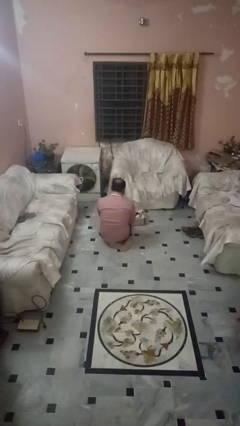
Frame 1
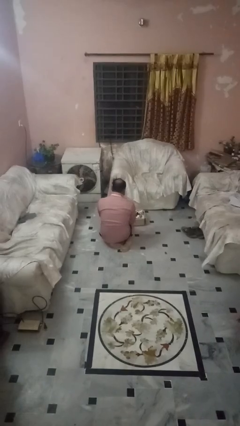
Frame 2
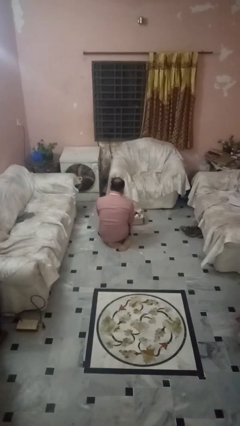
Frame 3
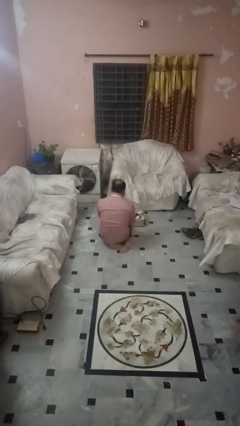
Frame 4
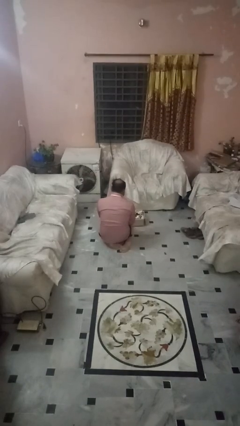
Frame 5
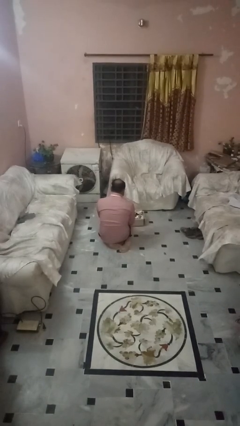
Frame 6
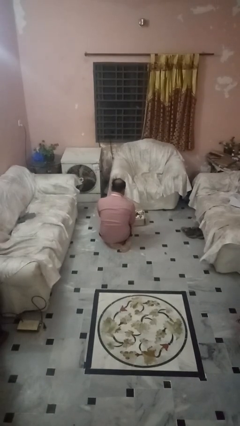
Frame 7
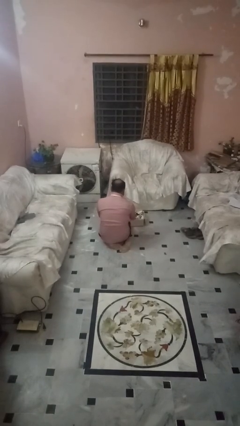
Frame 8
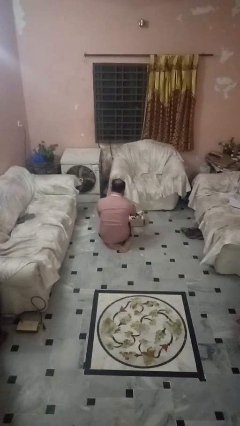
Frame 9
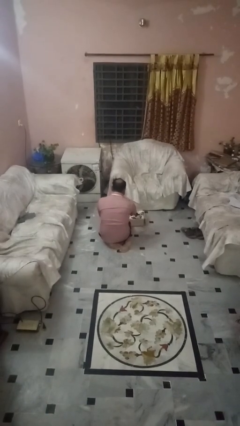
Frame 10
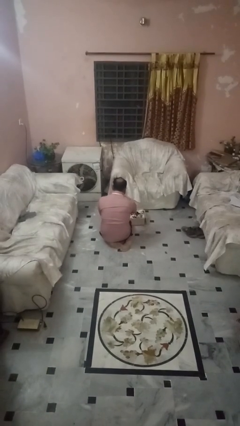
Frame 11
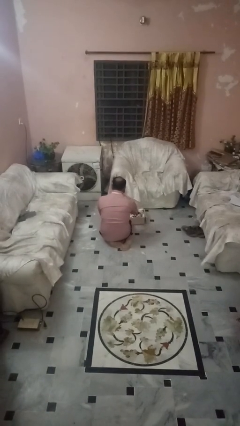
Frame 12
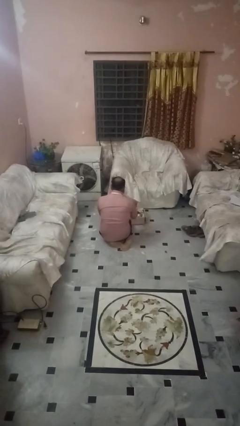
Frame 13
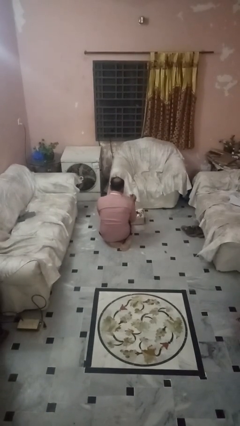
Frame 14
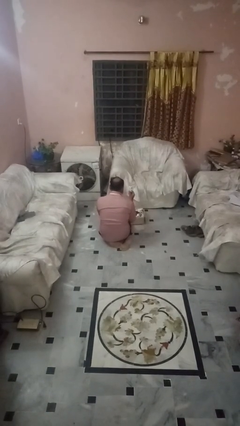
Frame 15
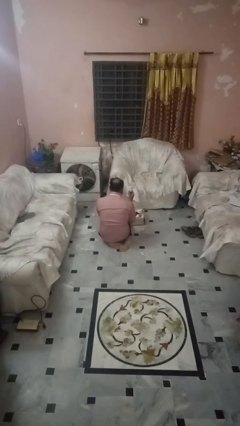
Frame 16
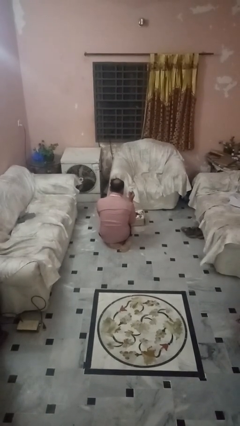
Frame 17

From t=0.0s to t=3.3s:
person takes object from box

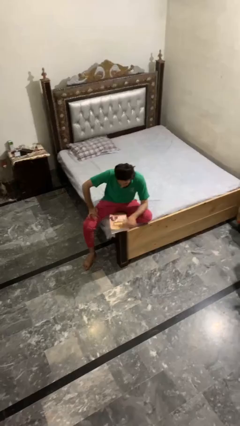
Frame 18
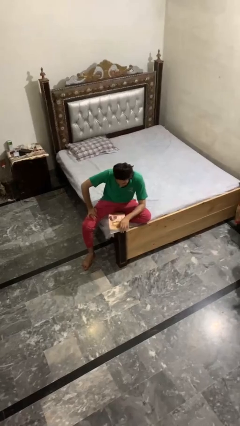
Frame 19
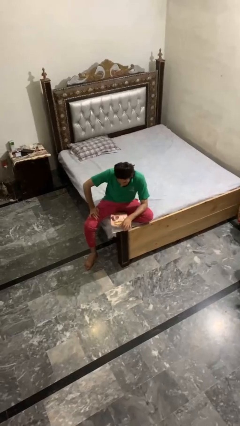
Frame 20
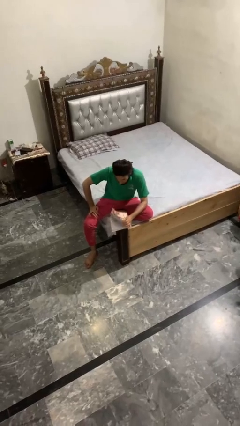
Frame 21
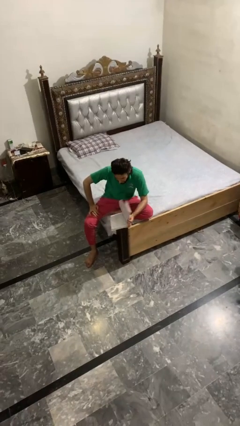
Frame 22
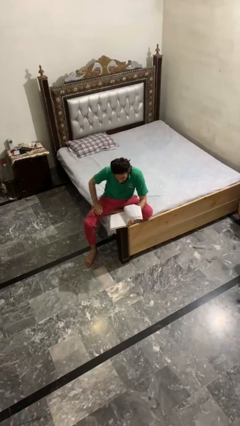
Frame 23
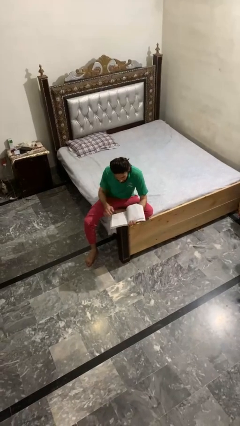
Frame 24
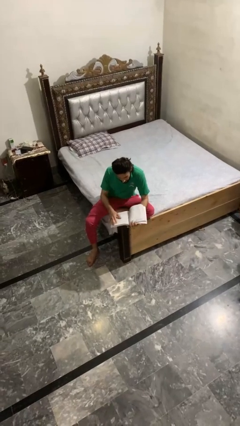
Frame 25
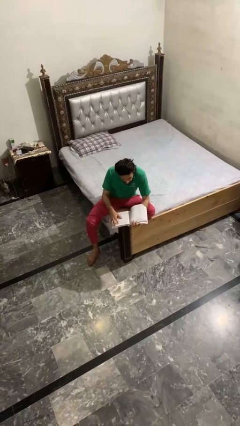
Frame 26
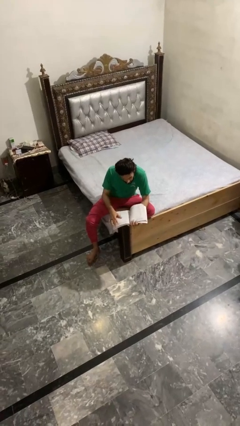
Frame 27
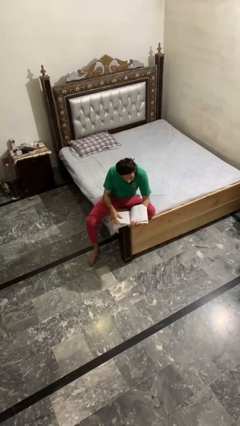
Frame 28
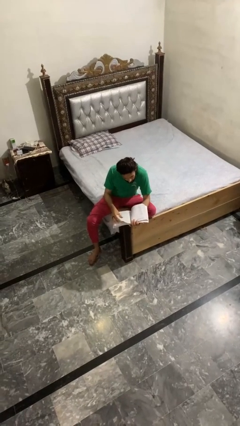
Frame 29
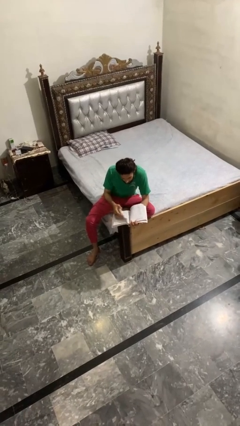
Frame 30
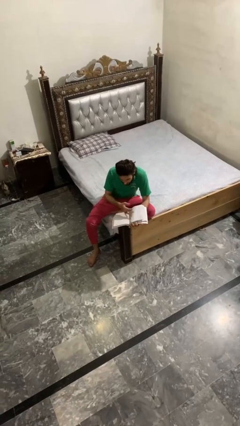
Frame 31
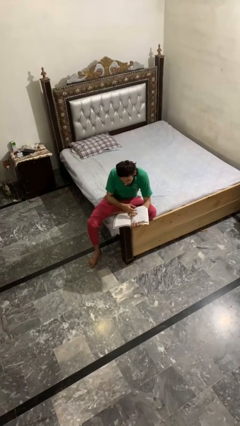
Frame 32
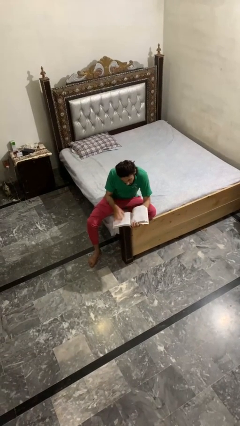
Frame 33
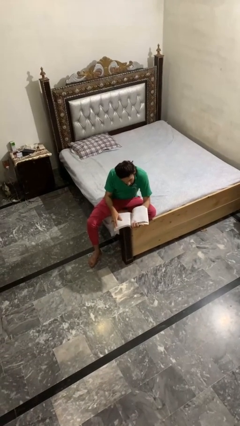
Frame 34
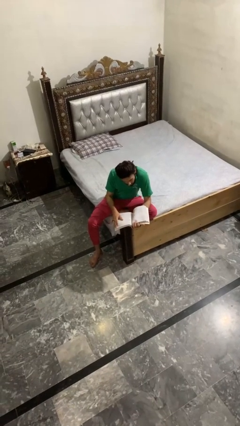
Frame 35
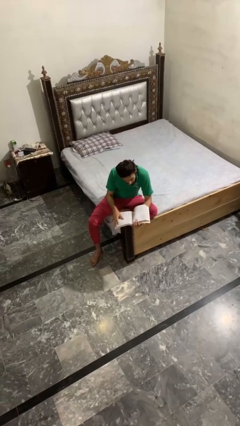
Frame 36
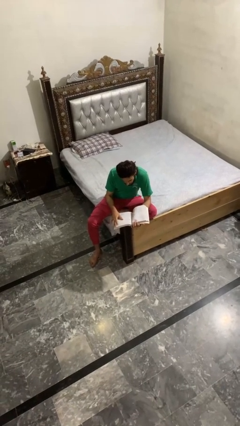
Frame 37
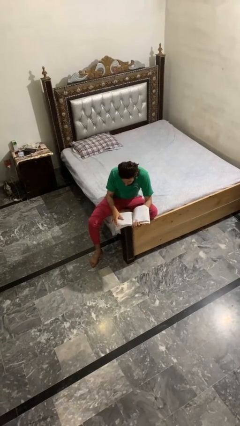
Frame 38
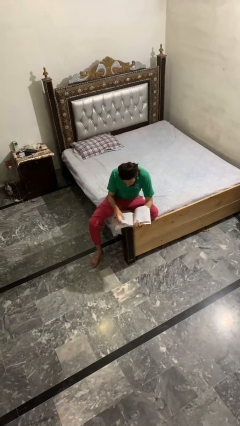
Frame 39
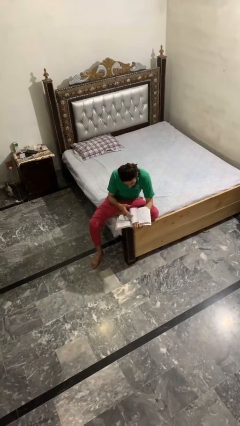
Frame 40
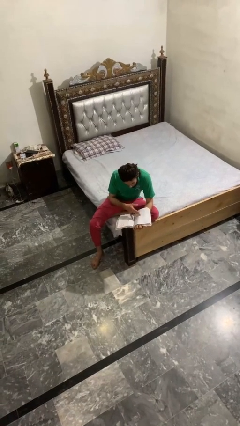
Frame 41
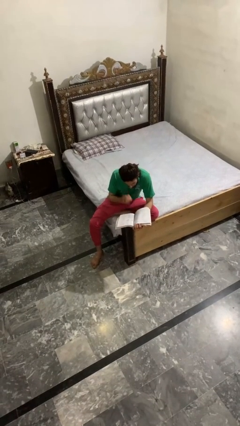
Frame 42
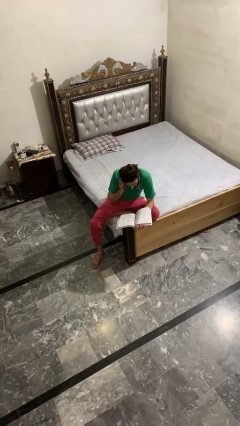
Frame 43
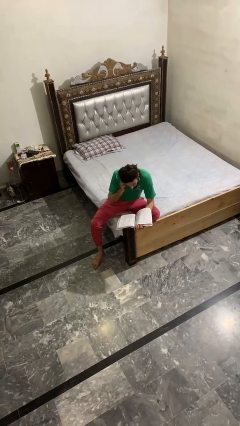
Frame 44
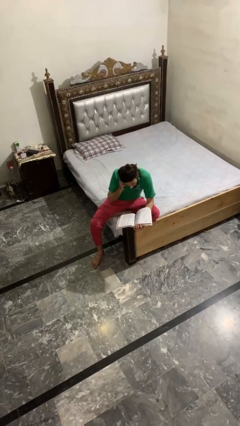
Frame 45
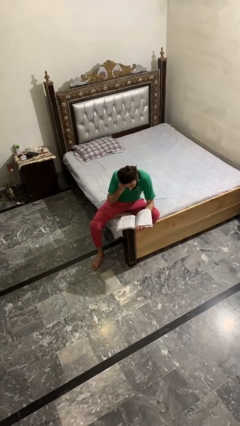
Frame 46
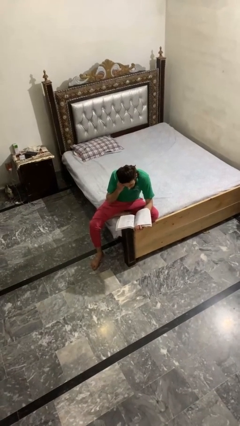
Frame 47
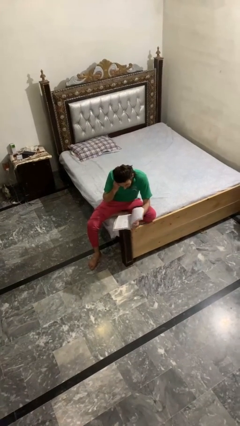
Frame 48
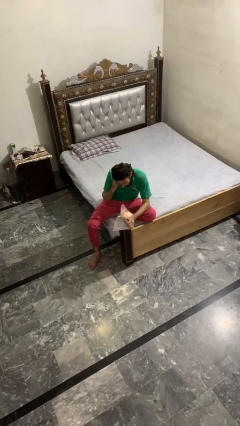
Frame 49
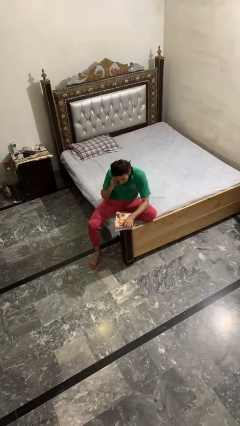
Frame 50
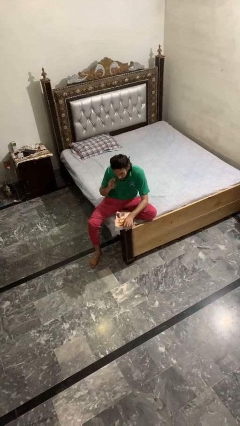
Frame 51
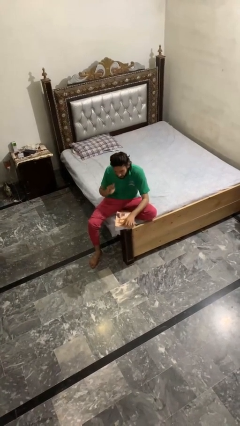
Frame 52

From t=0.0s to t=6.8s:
person reads book

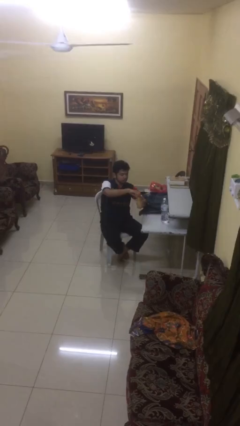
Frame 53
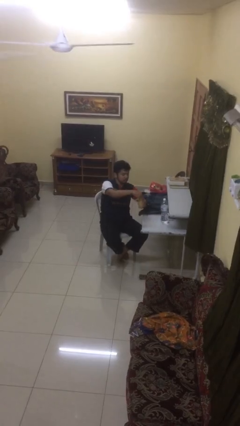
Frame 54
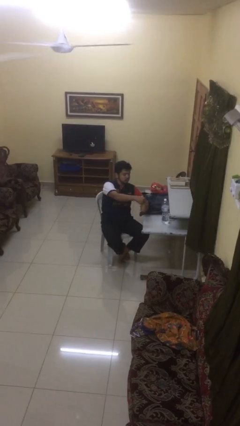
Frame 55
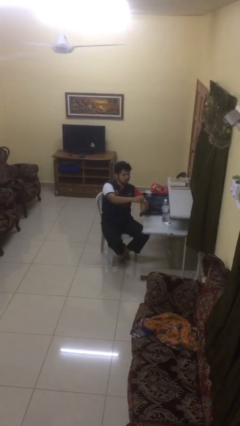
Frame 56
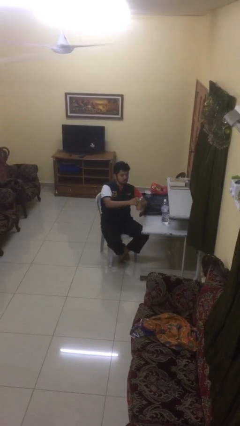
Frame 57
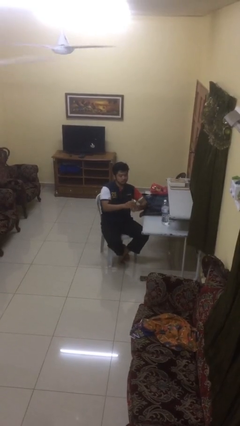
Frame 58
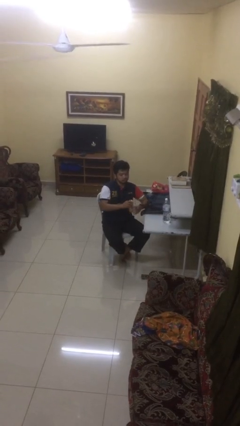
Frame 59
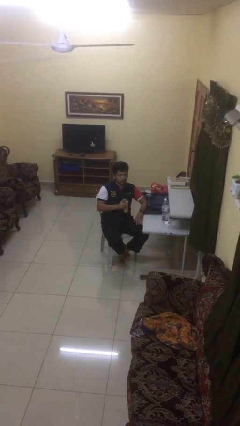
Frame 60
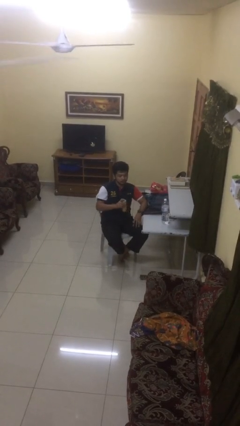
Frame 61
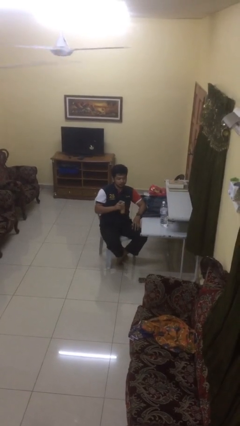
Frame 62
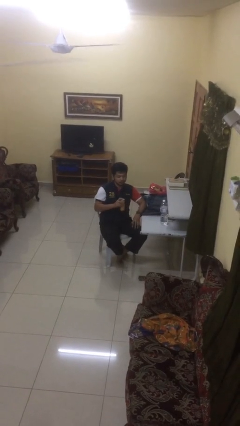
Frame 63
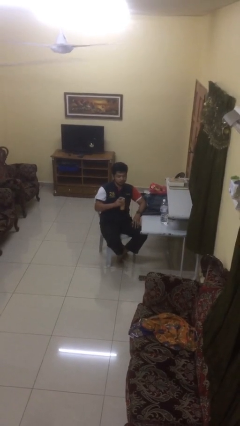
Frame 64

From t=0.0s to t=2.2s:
person opens beverage can

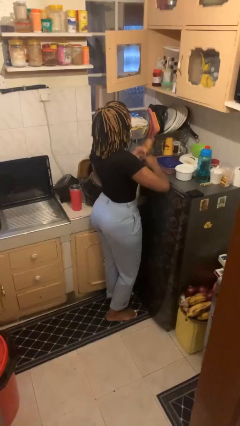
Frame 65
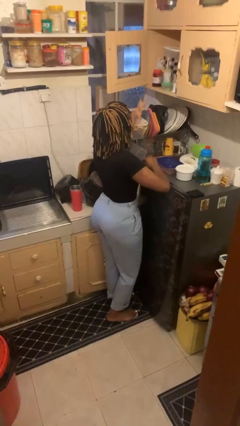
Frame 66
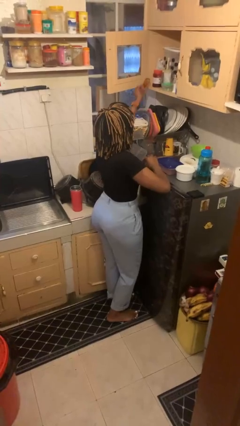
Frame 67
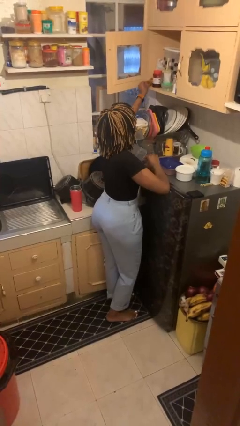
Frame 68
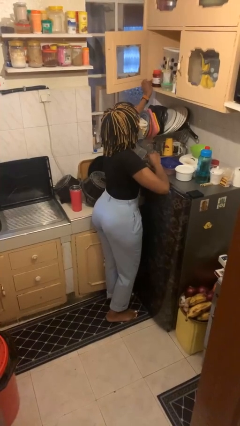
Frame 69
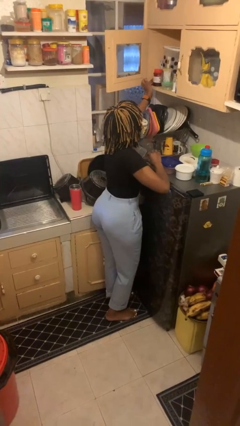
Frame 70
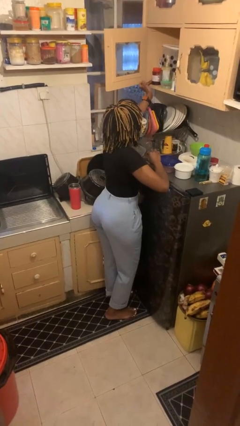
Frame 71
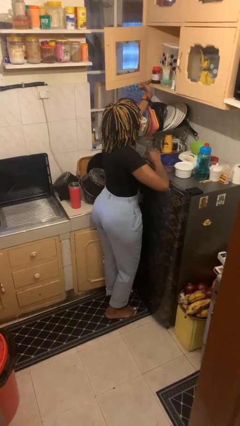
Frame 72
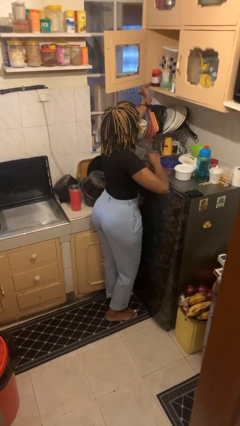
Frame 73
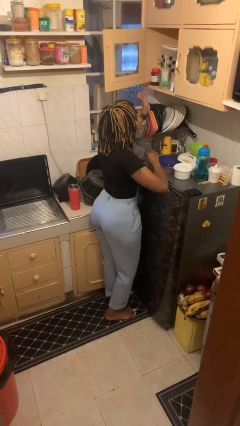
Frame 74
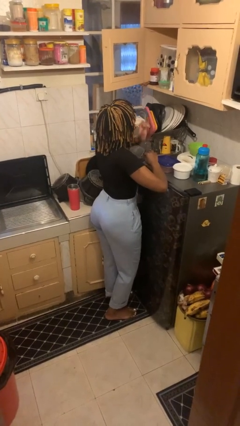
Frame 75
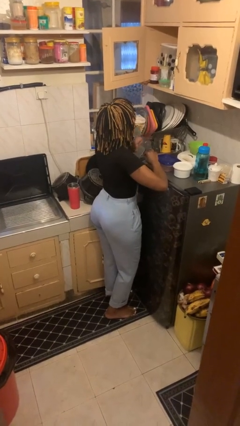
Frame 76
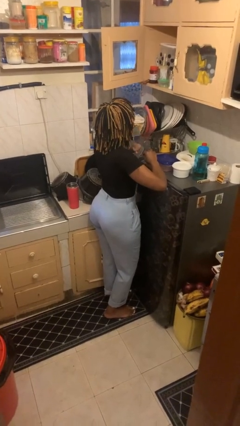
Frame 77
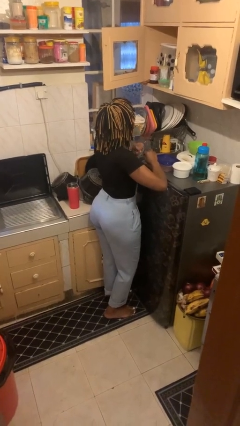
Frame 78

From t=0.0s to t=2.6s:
person puts object in cabinet

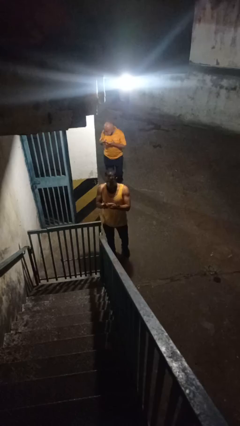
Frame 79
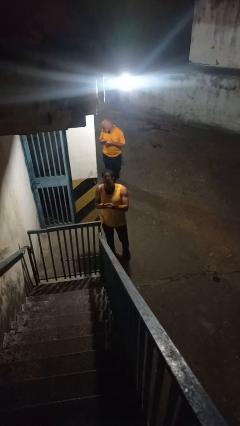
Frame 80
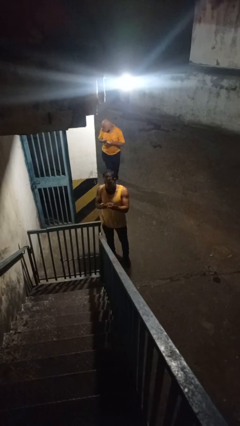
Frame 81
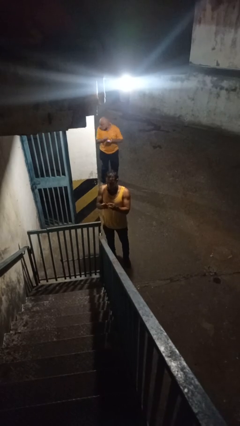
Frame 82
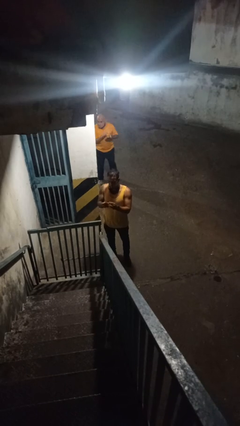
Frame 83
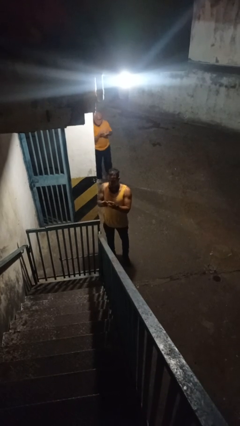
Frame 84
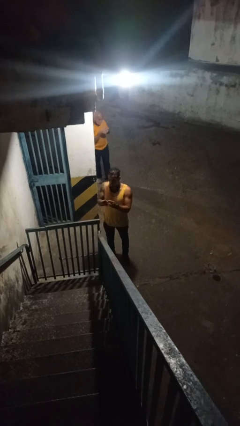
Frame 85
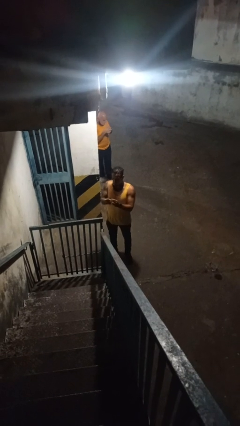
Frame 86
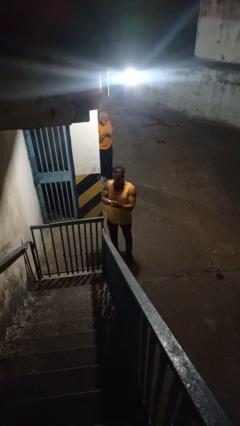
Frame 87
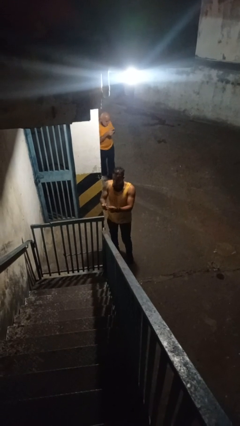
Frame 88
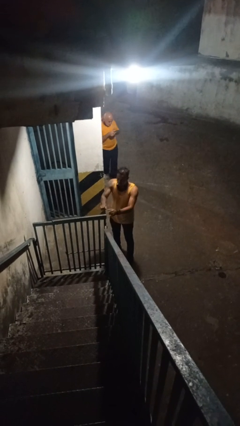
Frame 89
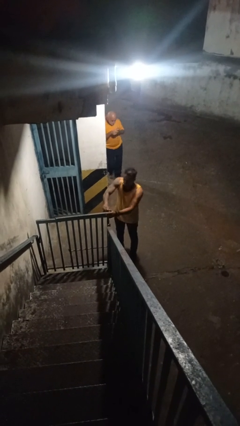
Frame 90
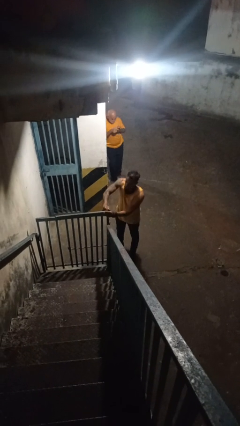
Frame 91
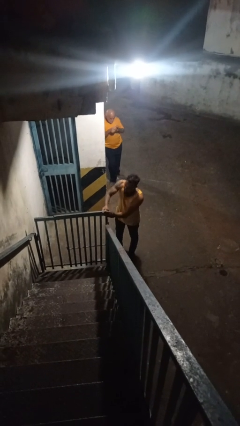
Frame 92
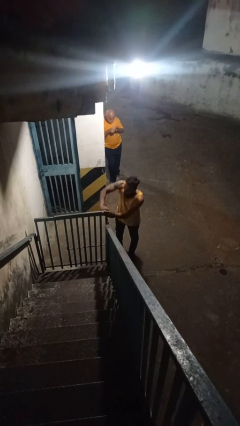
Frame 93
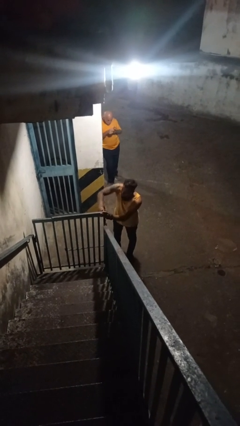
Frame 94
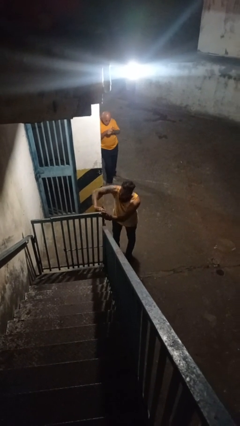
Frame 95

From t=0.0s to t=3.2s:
person unlocks door with keys
